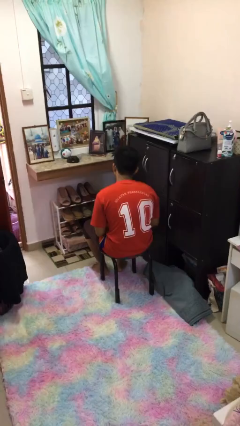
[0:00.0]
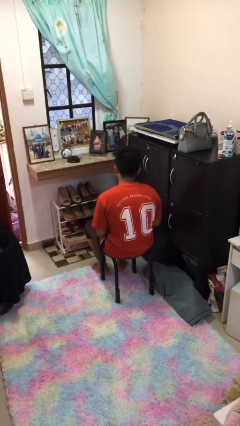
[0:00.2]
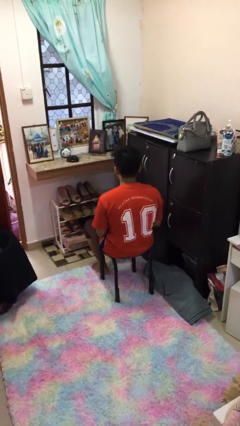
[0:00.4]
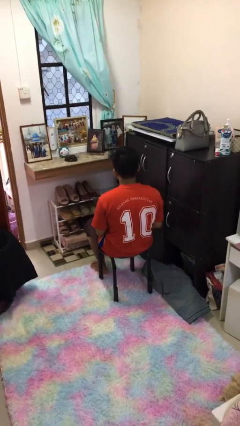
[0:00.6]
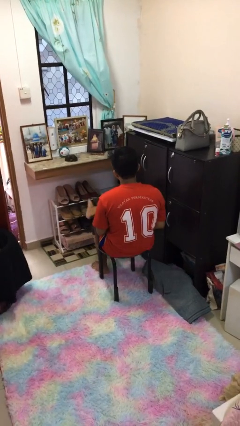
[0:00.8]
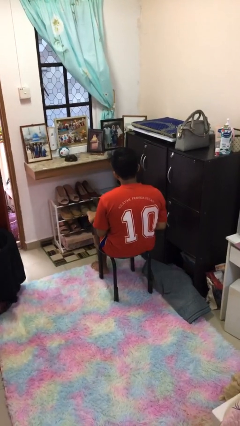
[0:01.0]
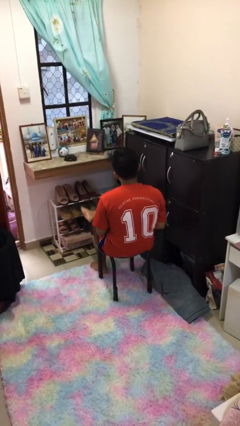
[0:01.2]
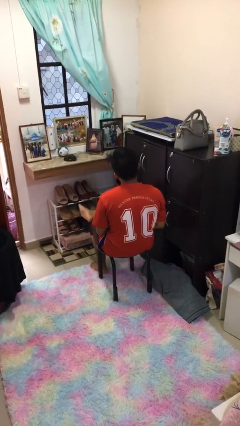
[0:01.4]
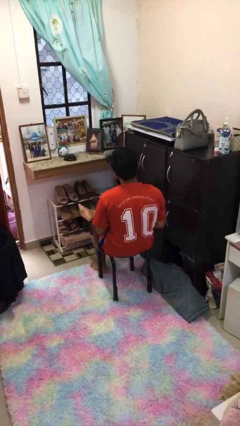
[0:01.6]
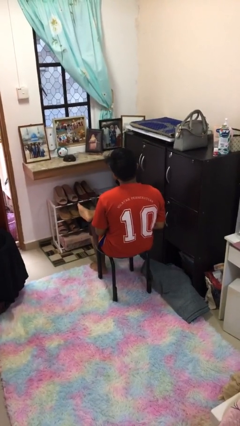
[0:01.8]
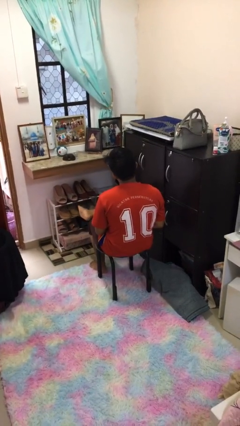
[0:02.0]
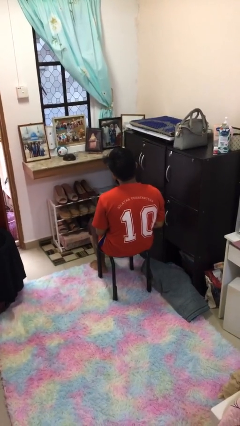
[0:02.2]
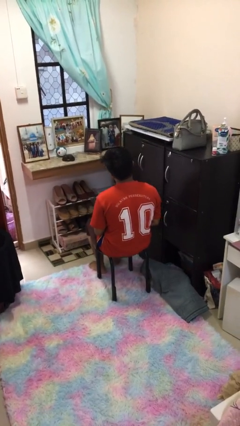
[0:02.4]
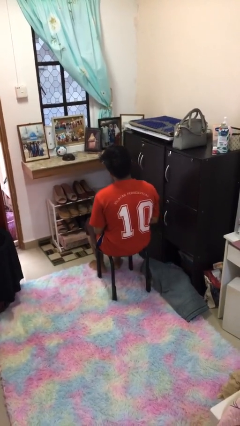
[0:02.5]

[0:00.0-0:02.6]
person crosses legs

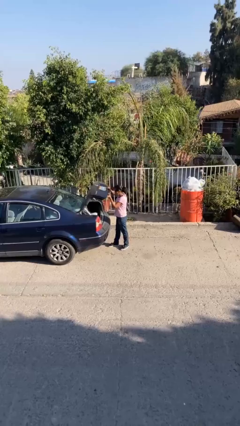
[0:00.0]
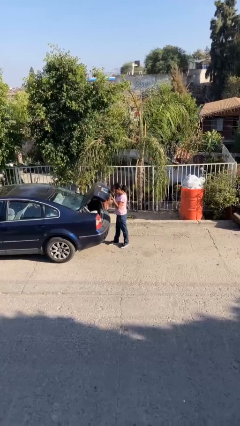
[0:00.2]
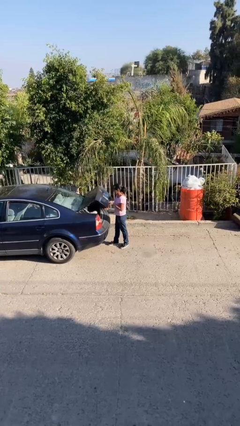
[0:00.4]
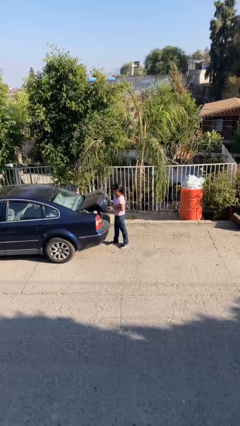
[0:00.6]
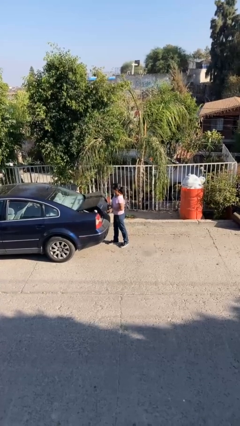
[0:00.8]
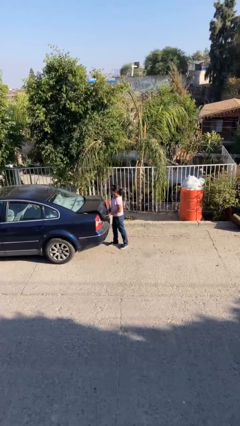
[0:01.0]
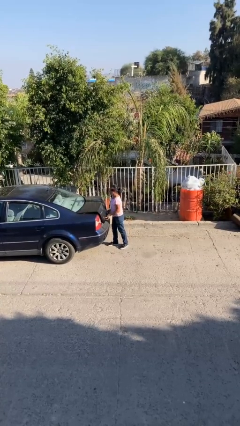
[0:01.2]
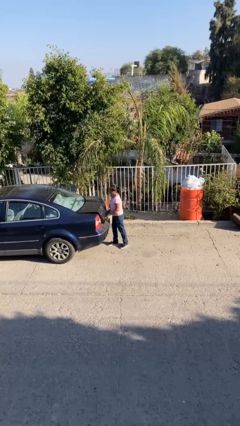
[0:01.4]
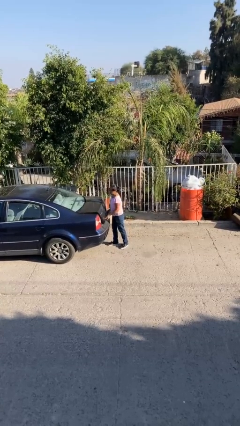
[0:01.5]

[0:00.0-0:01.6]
person closes car trunk

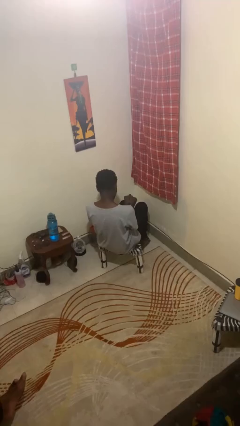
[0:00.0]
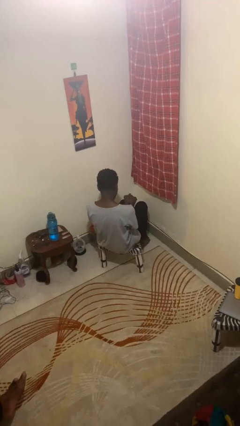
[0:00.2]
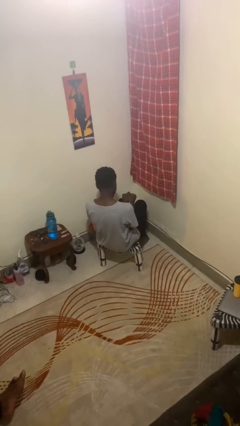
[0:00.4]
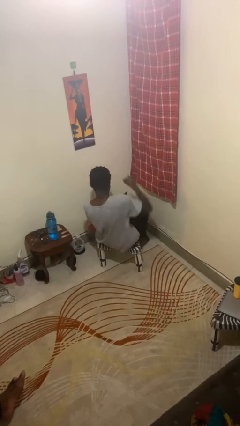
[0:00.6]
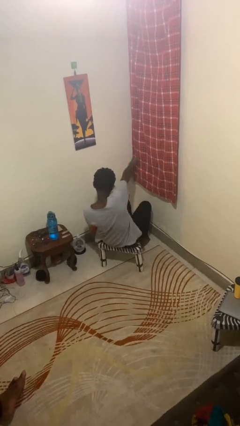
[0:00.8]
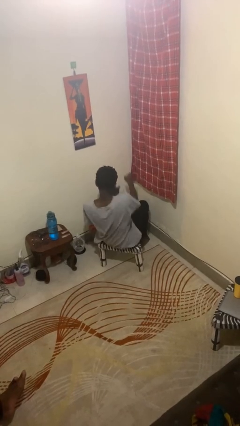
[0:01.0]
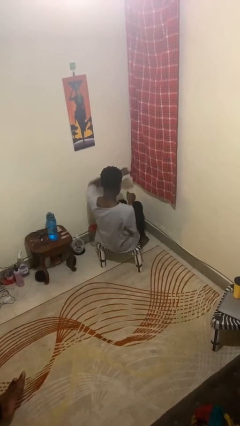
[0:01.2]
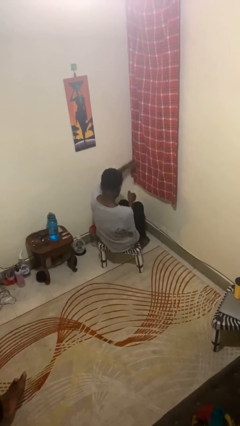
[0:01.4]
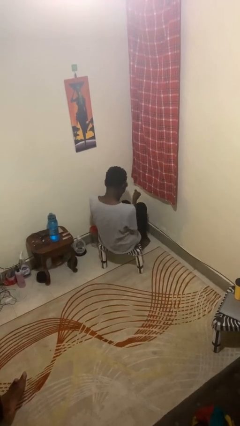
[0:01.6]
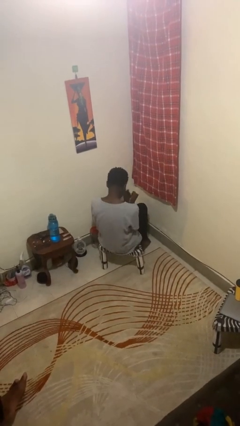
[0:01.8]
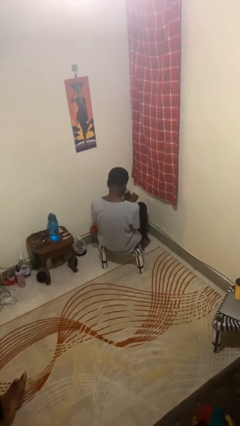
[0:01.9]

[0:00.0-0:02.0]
person punches

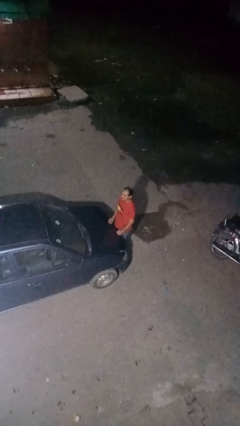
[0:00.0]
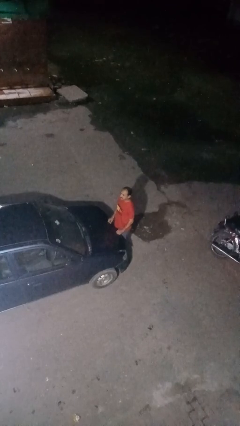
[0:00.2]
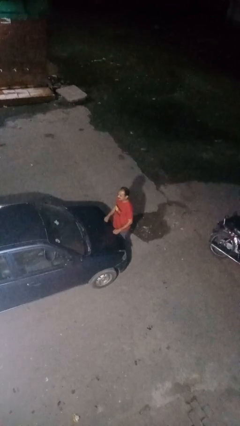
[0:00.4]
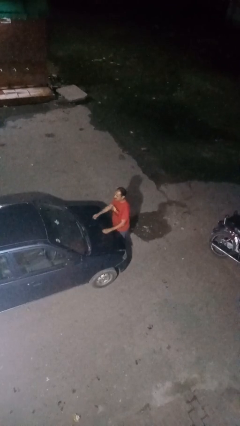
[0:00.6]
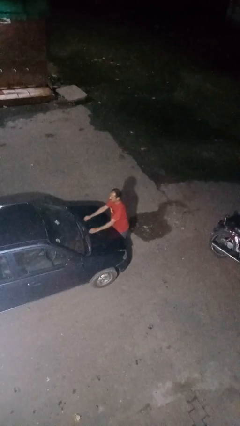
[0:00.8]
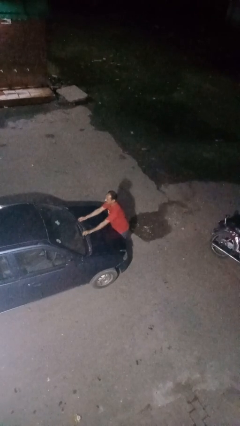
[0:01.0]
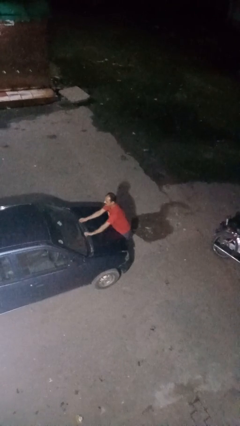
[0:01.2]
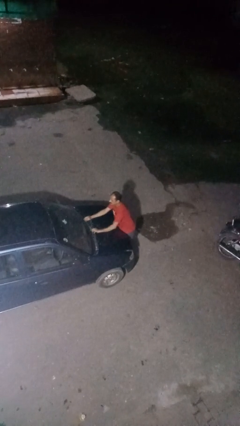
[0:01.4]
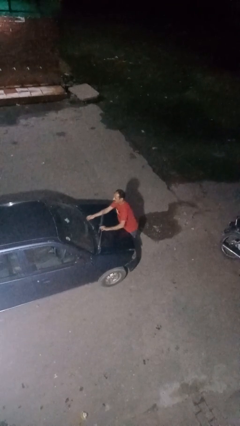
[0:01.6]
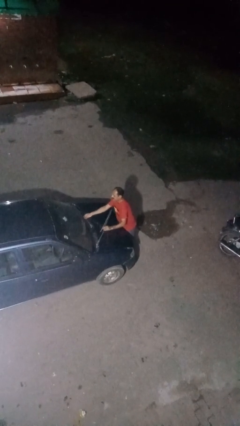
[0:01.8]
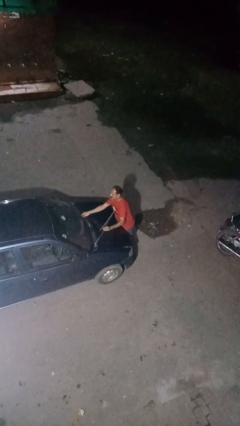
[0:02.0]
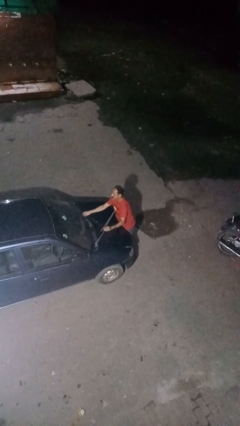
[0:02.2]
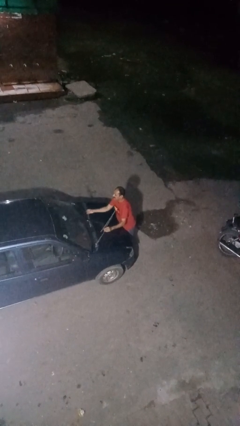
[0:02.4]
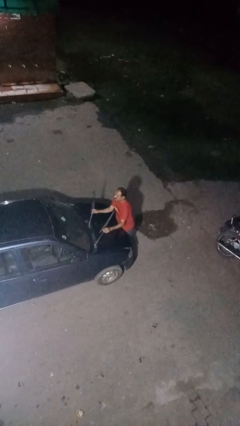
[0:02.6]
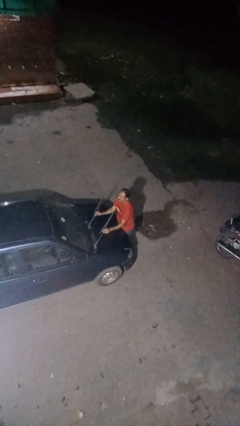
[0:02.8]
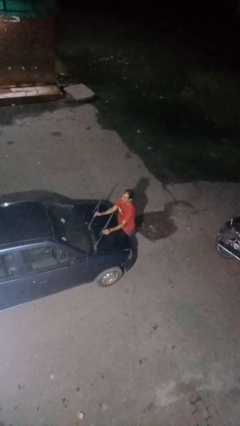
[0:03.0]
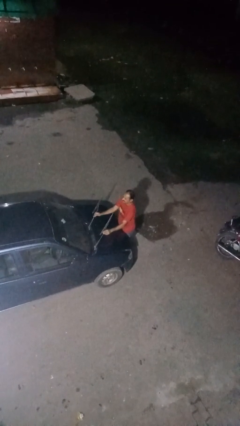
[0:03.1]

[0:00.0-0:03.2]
person flips up car wipers

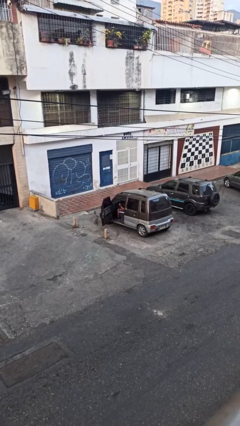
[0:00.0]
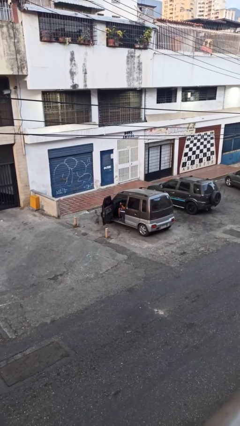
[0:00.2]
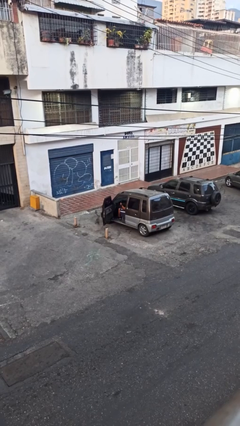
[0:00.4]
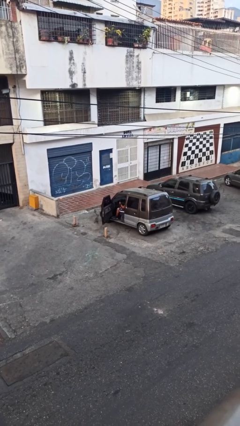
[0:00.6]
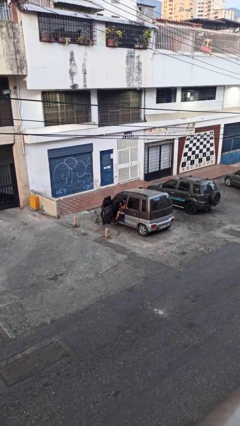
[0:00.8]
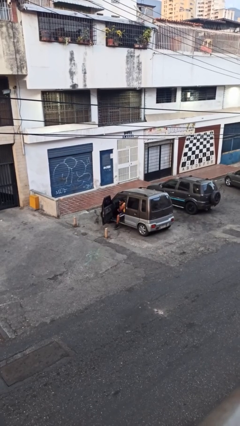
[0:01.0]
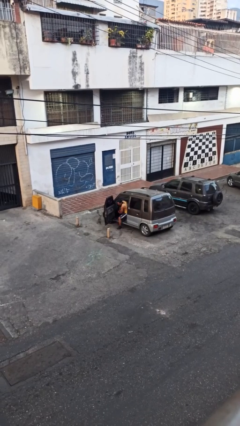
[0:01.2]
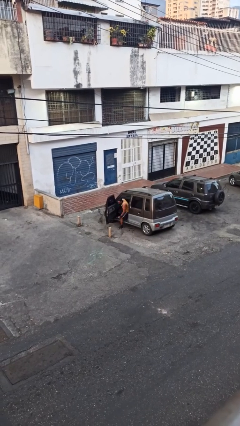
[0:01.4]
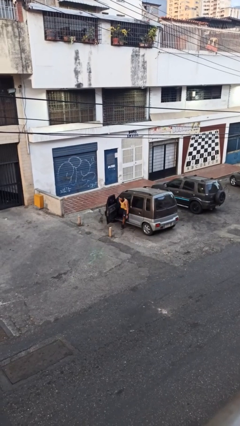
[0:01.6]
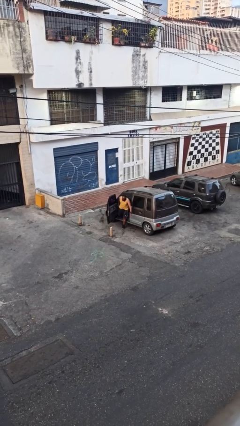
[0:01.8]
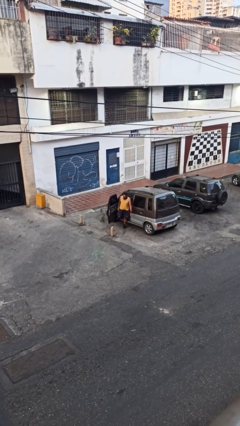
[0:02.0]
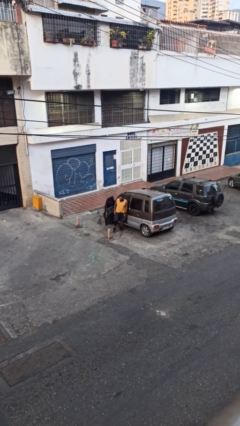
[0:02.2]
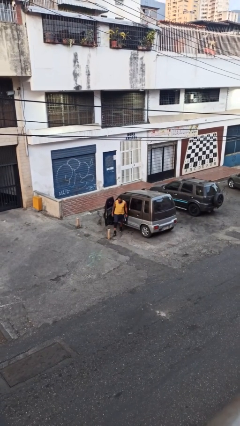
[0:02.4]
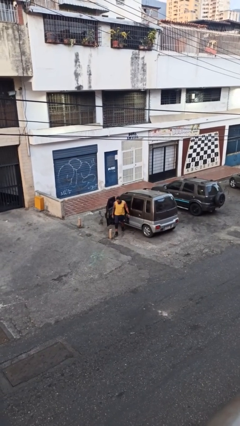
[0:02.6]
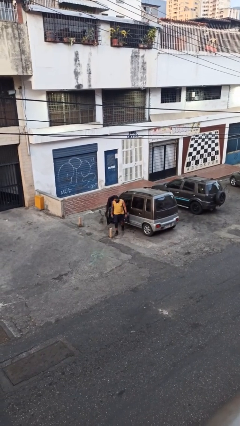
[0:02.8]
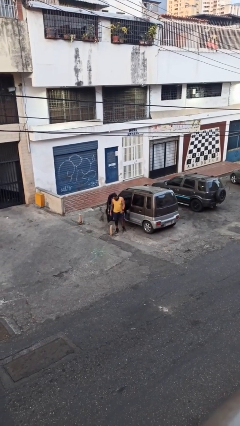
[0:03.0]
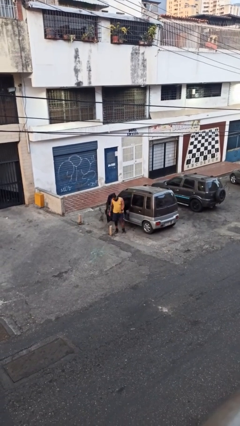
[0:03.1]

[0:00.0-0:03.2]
person exits car

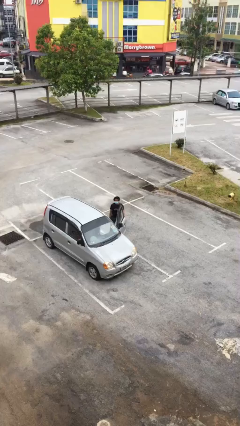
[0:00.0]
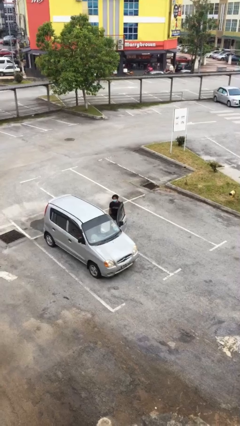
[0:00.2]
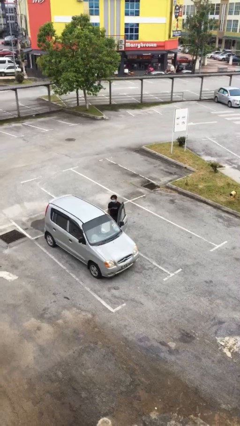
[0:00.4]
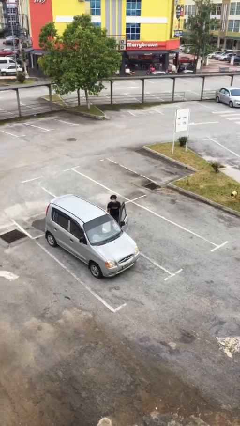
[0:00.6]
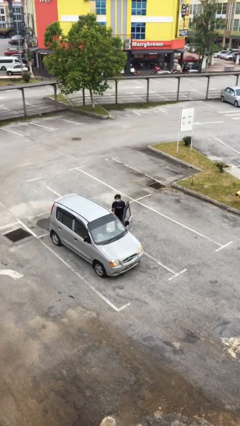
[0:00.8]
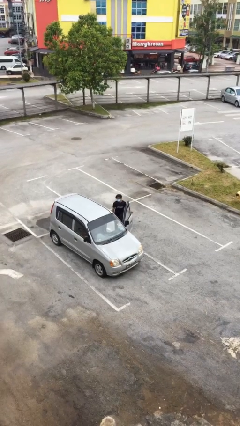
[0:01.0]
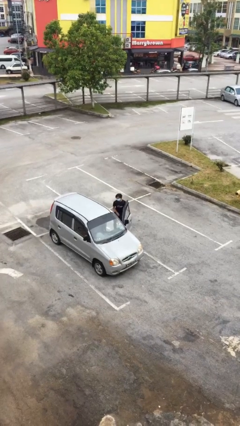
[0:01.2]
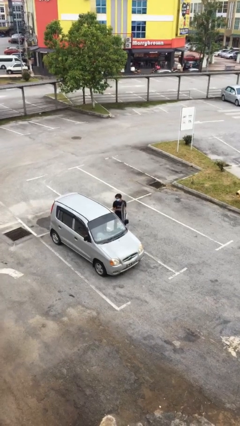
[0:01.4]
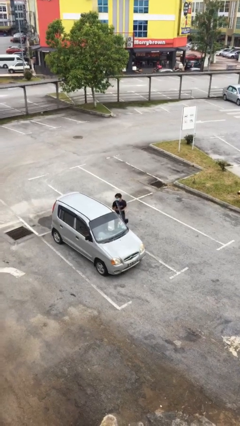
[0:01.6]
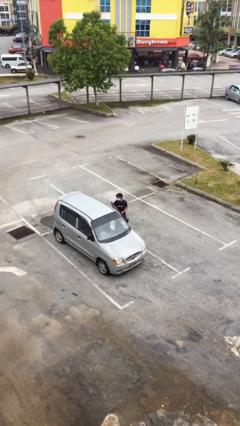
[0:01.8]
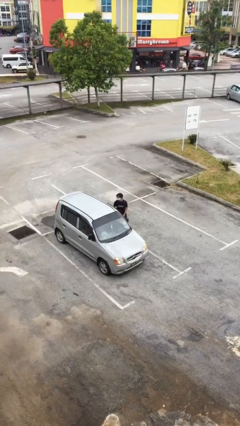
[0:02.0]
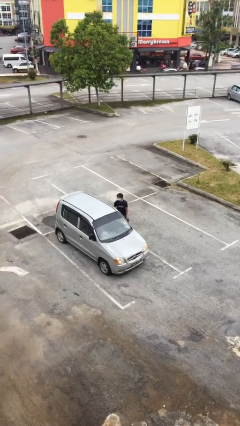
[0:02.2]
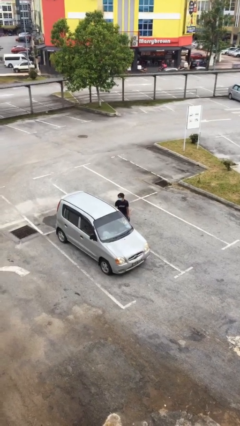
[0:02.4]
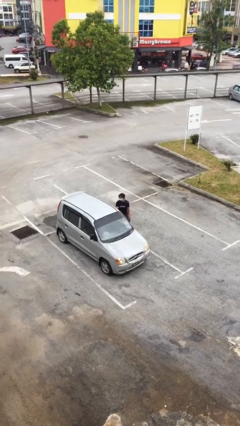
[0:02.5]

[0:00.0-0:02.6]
person closes car door

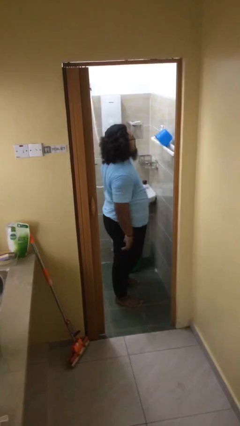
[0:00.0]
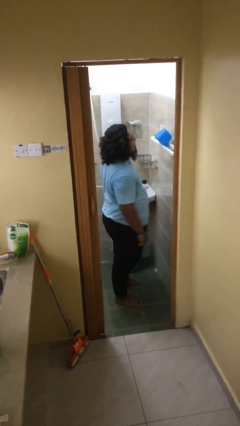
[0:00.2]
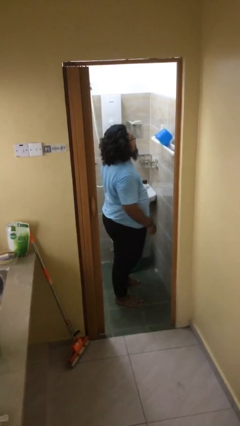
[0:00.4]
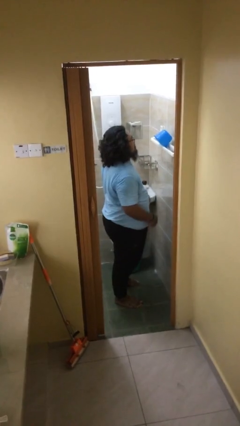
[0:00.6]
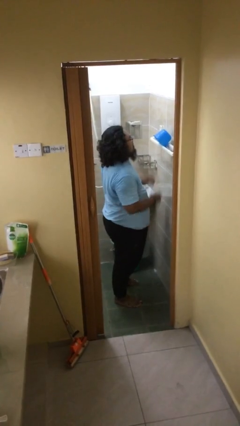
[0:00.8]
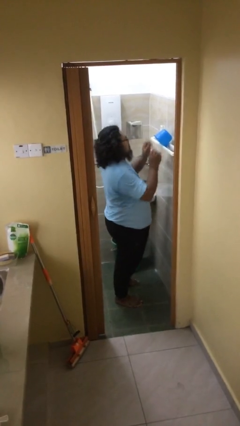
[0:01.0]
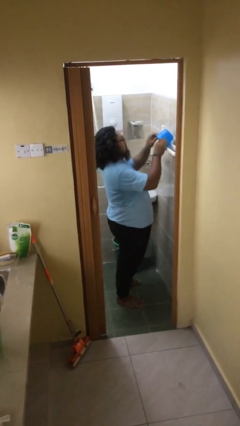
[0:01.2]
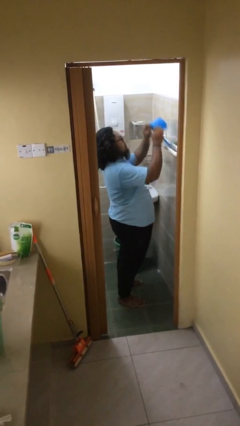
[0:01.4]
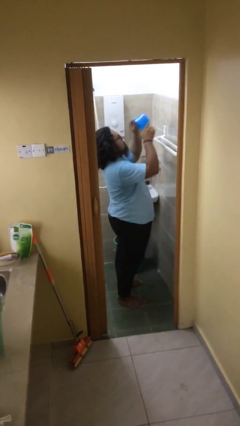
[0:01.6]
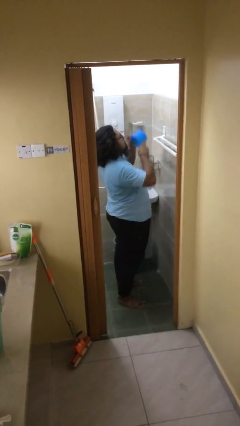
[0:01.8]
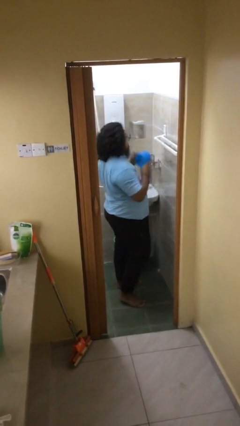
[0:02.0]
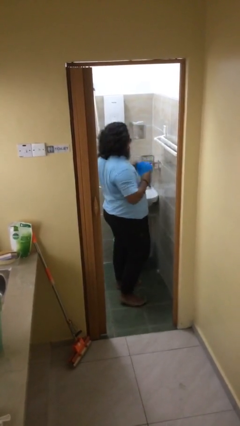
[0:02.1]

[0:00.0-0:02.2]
person picks up object from countertop
